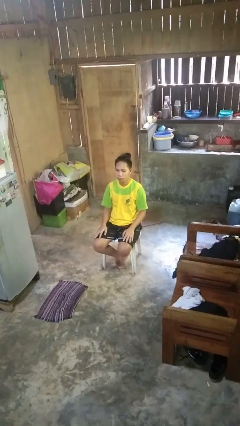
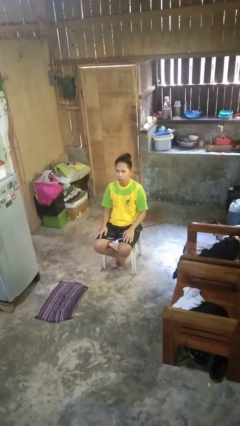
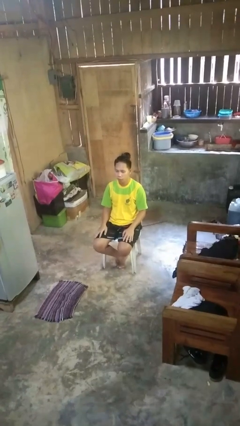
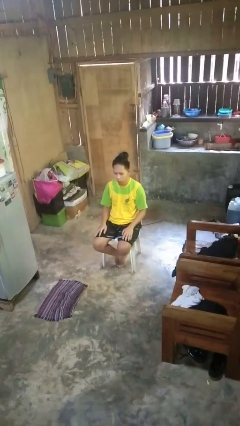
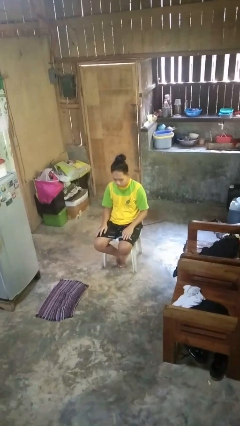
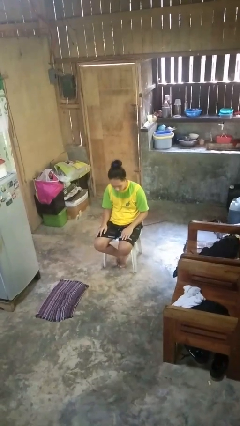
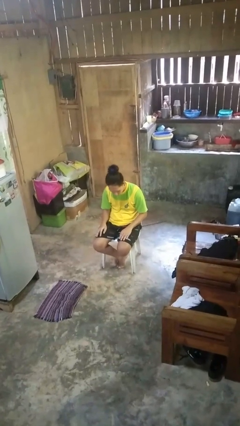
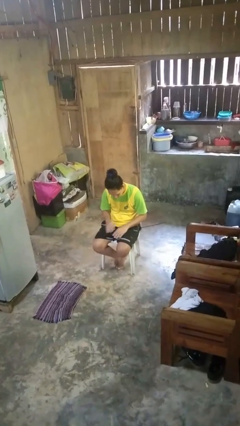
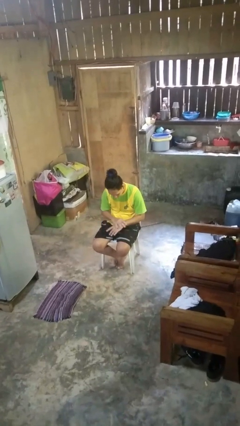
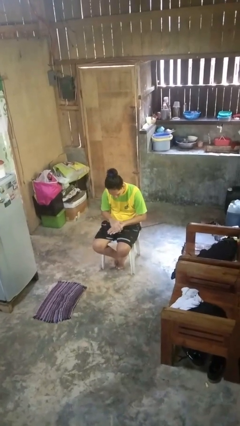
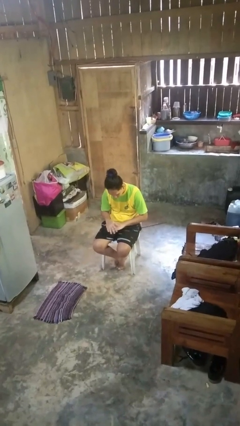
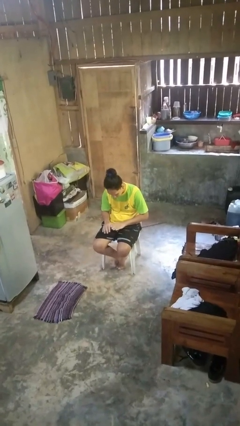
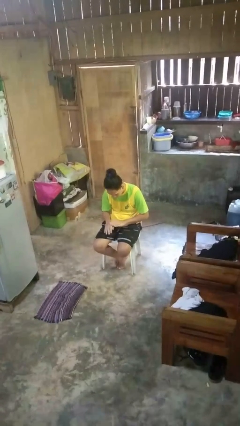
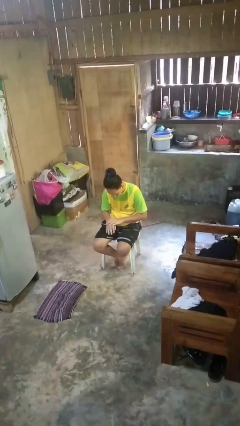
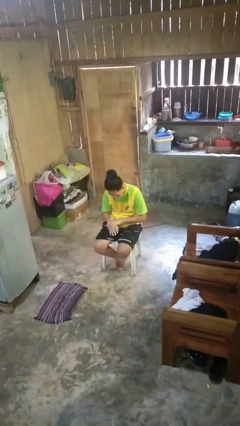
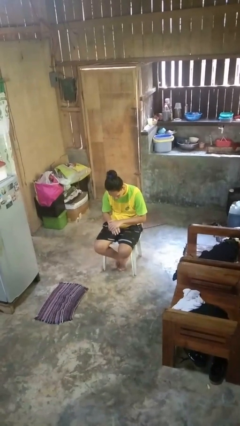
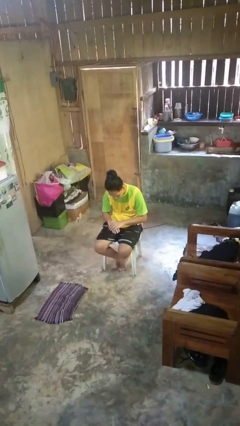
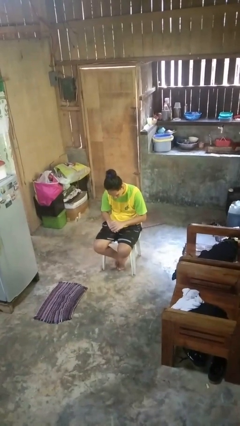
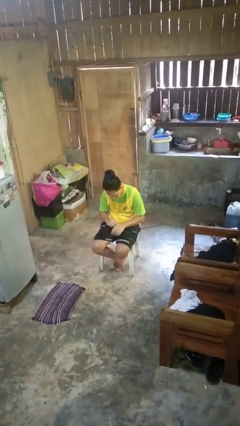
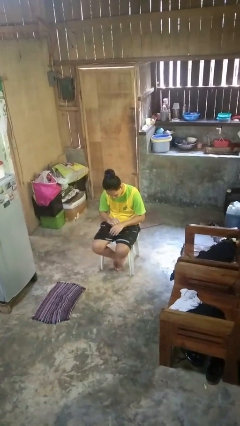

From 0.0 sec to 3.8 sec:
person looks at hands in lap

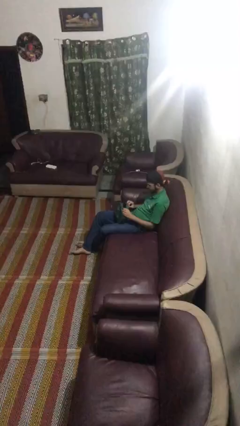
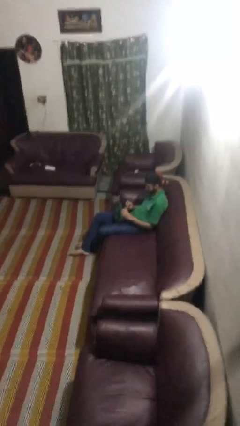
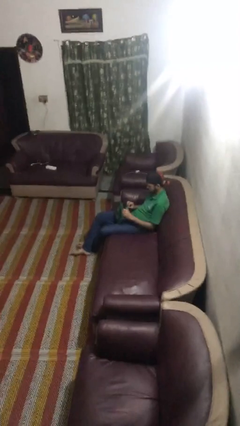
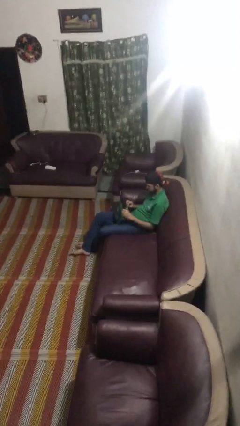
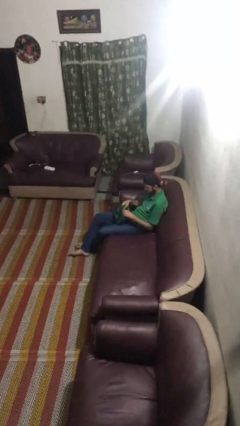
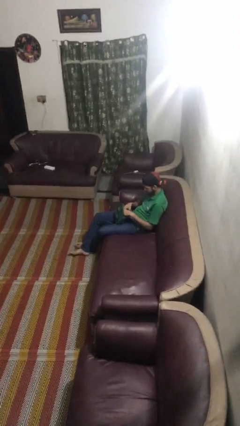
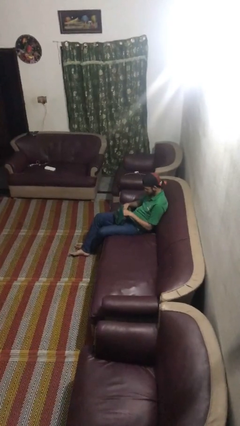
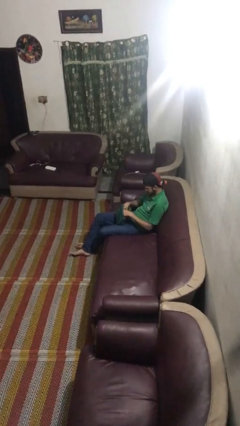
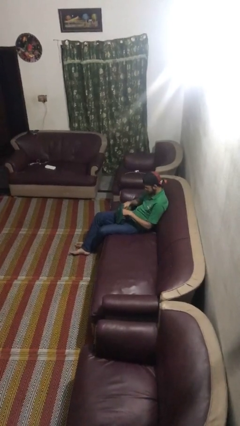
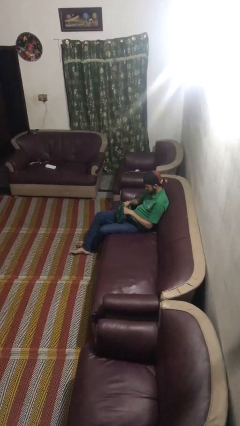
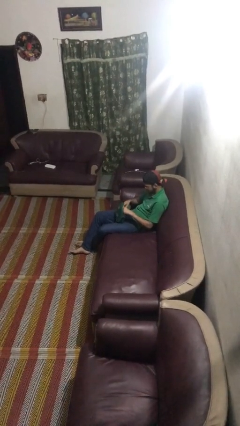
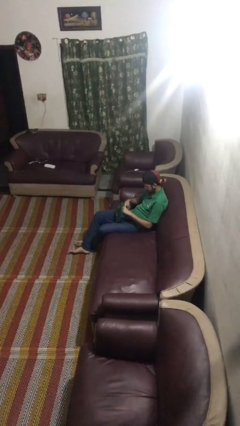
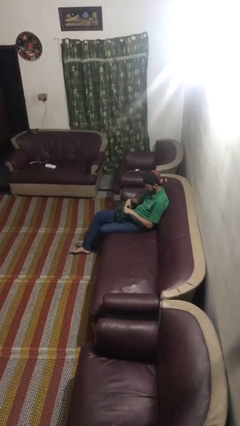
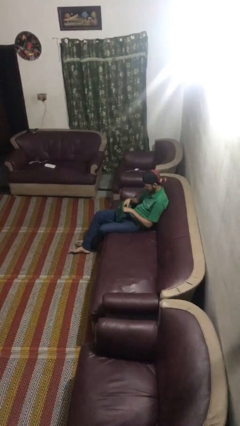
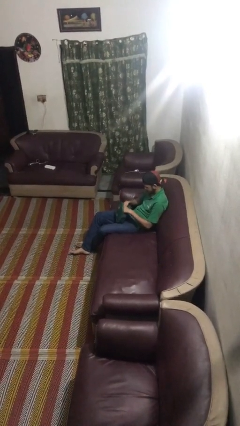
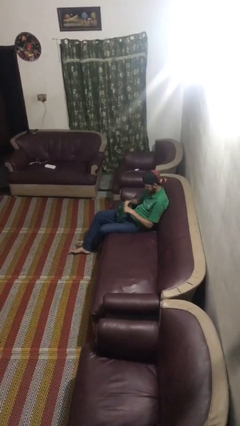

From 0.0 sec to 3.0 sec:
person searches in purse

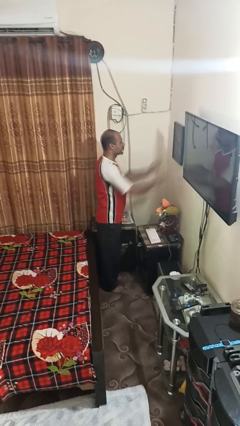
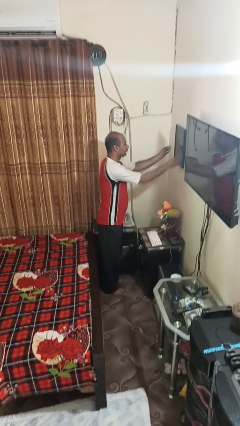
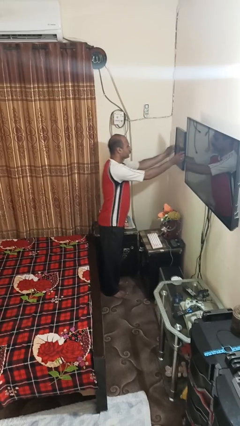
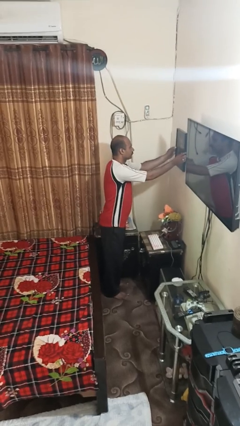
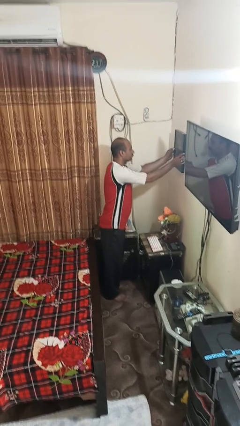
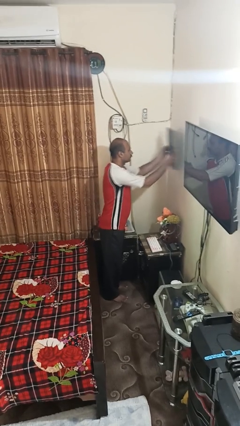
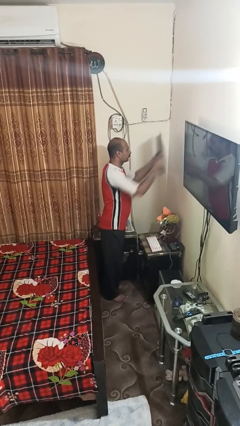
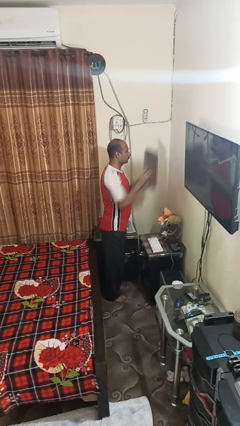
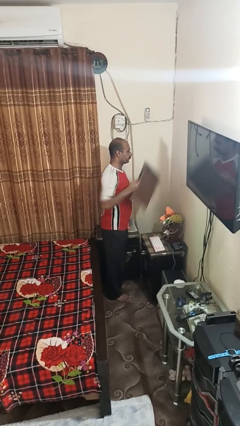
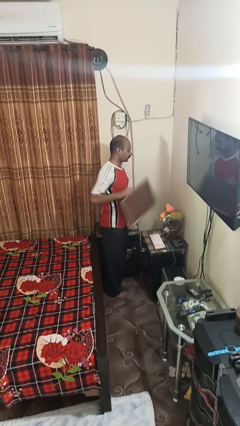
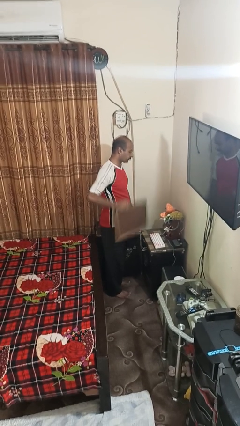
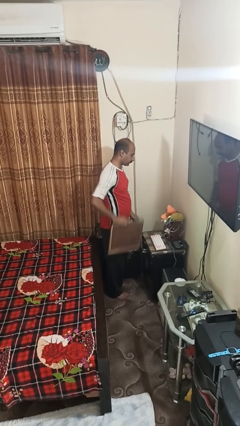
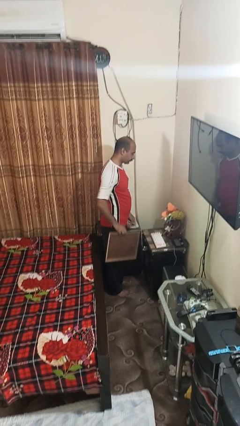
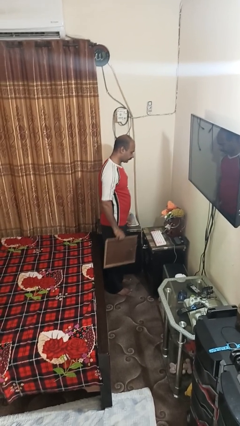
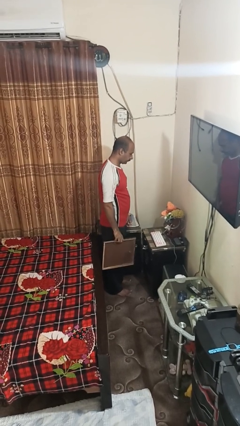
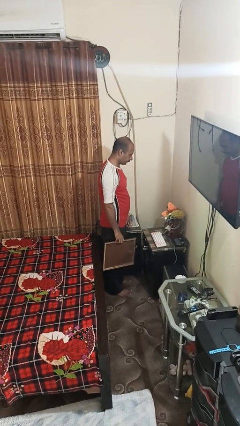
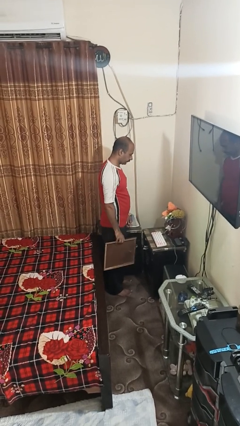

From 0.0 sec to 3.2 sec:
person takes down picture frame

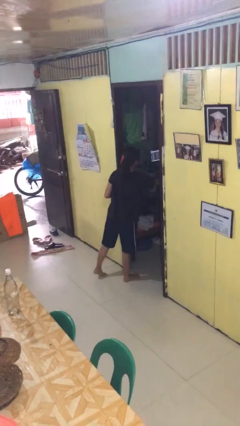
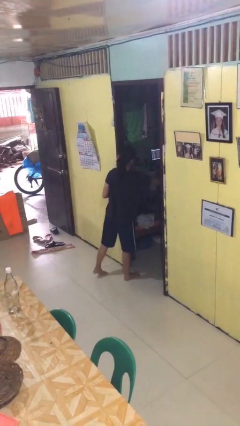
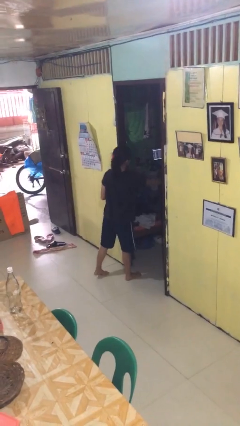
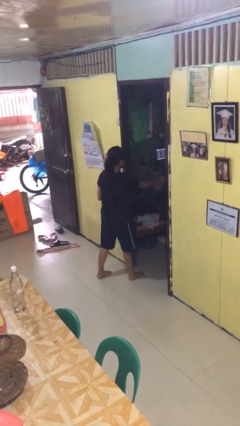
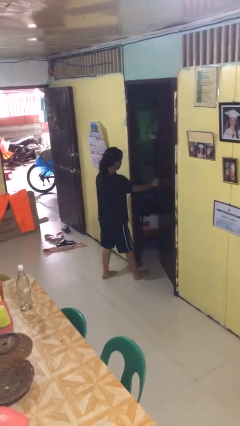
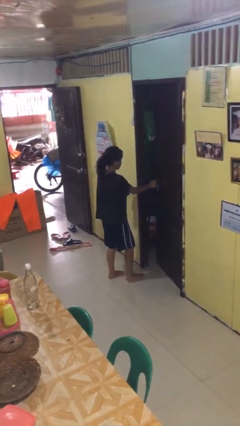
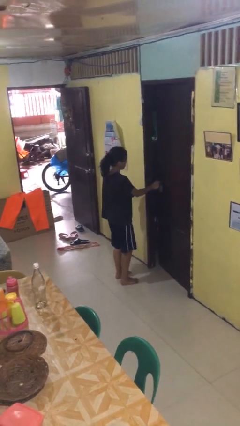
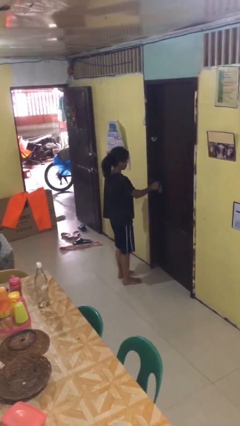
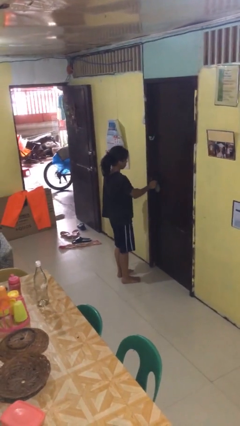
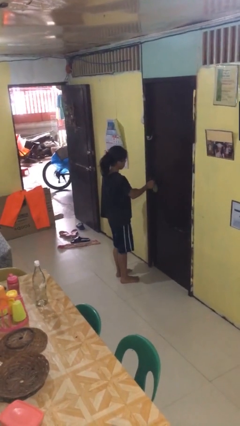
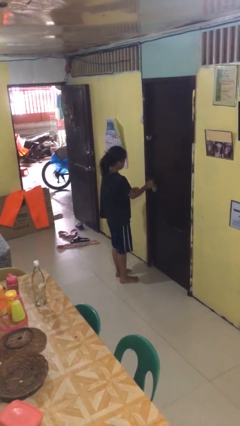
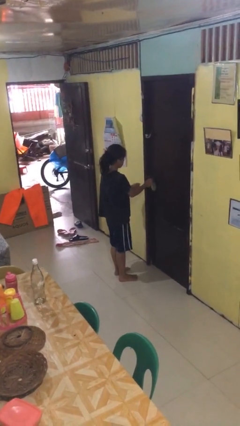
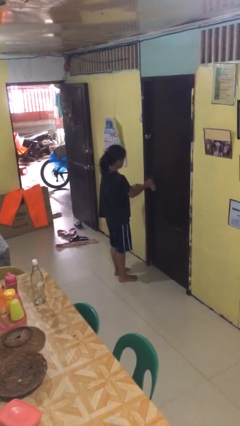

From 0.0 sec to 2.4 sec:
person closes facility door

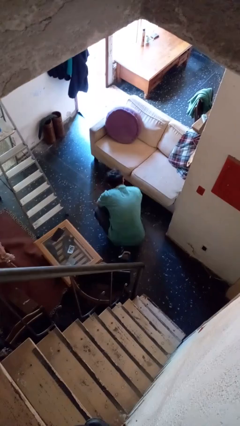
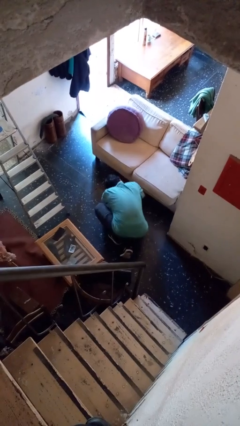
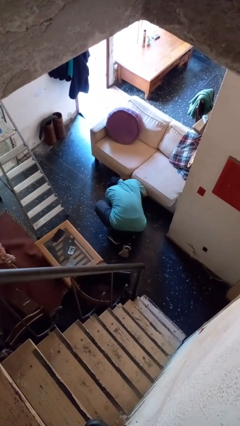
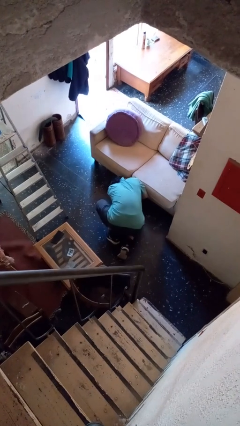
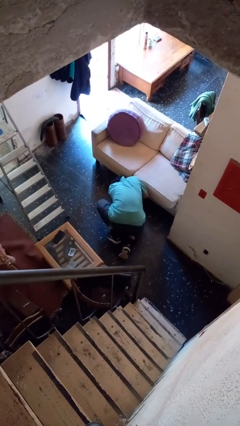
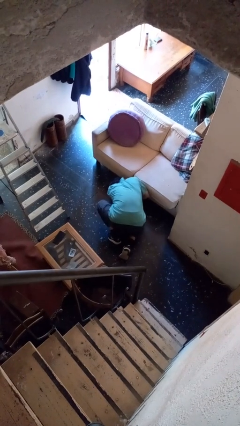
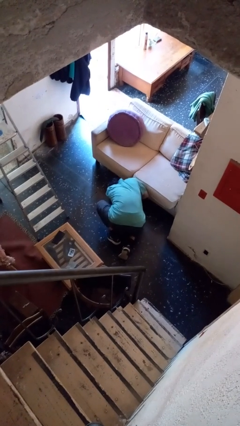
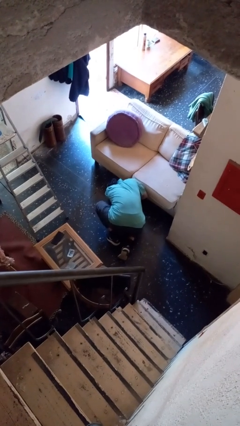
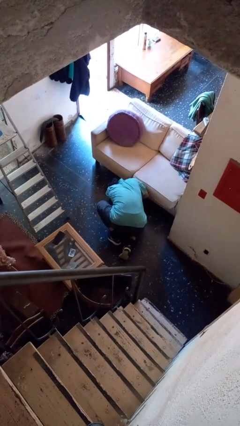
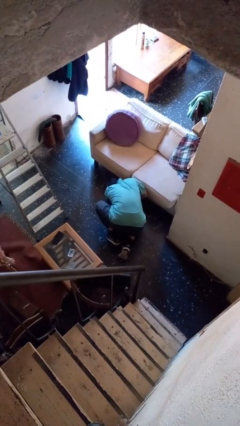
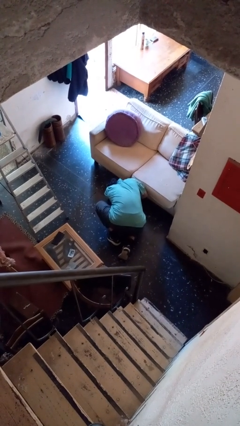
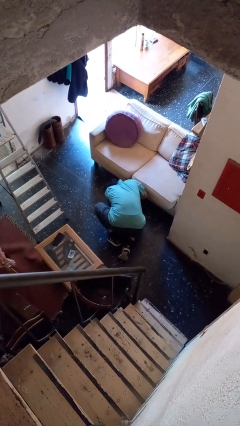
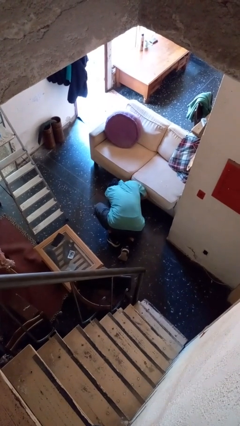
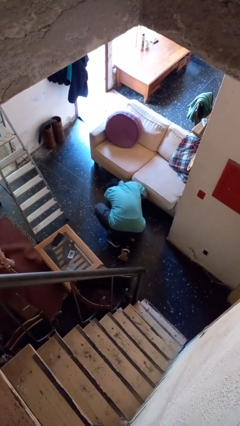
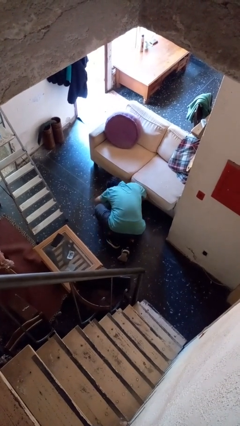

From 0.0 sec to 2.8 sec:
person searches under couch

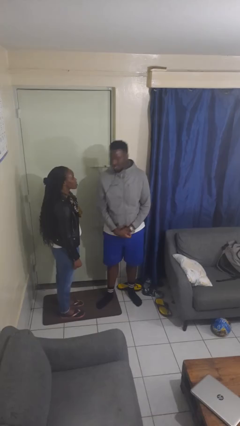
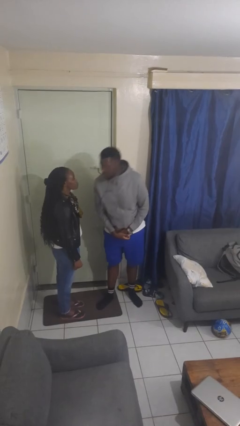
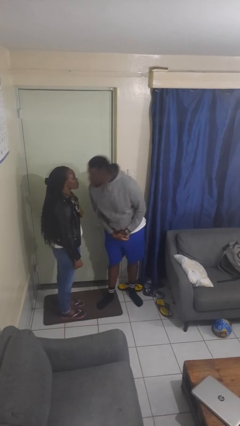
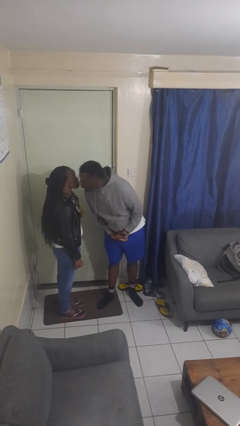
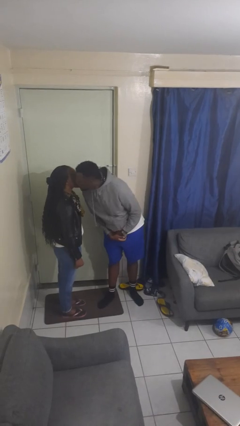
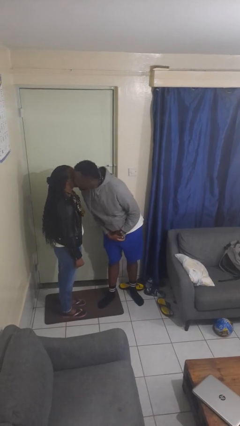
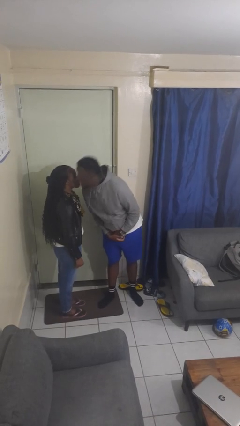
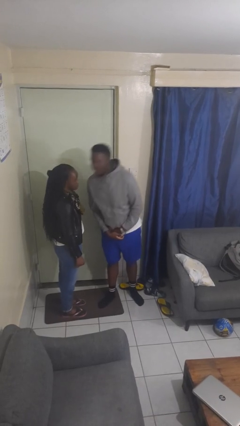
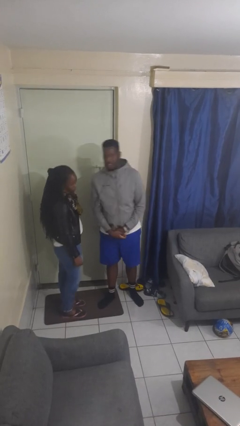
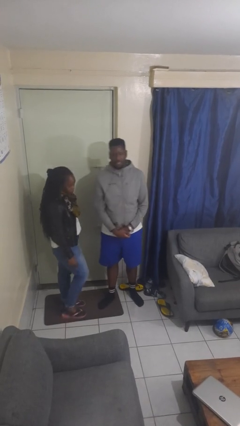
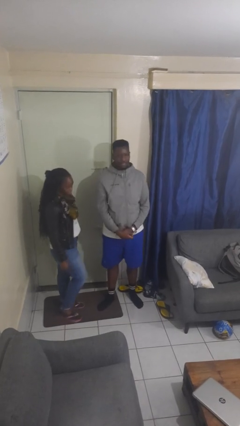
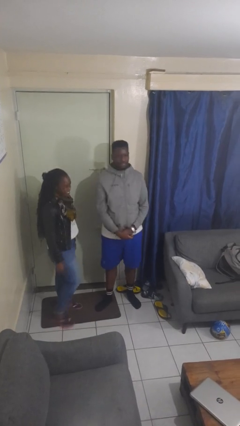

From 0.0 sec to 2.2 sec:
person kisses cheek of person
